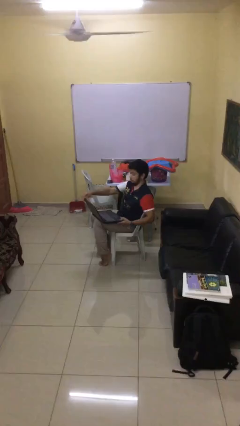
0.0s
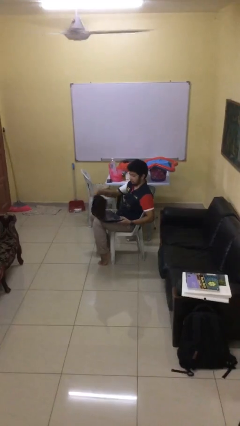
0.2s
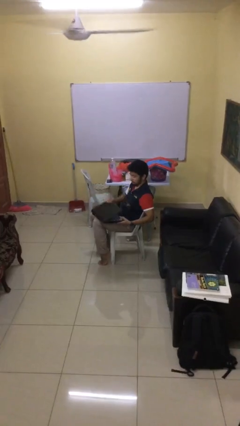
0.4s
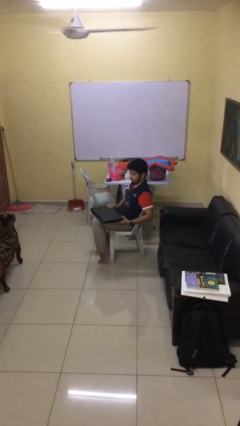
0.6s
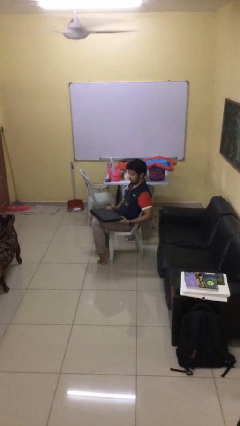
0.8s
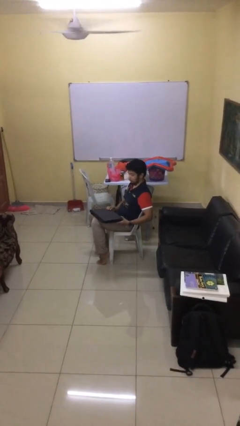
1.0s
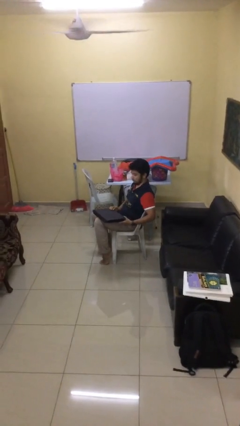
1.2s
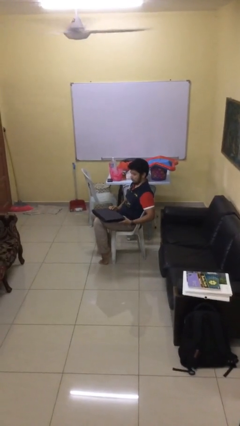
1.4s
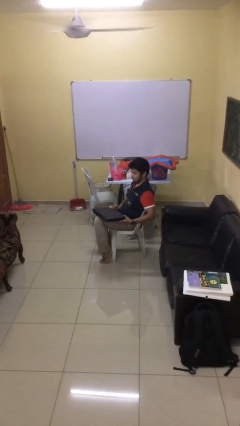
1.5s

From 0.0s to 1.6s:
person closes laptop

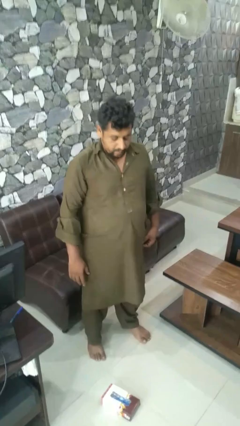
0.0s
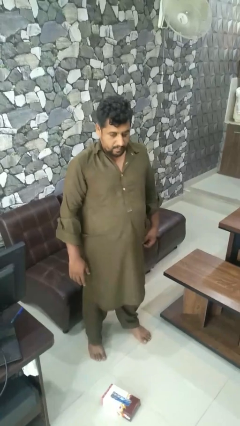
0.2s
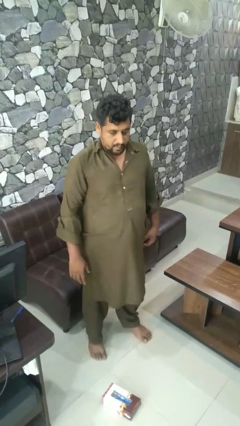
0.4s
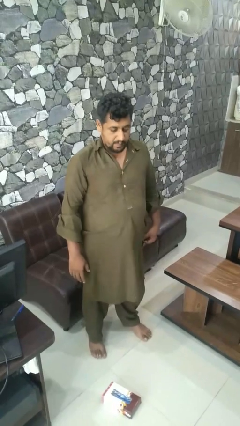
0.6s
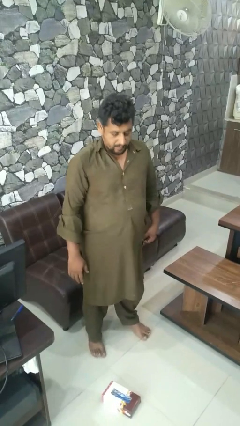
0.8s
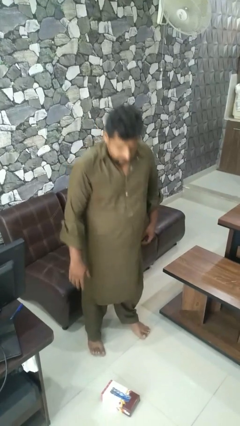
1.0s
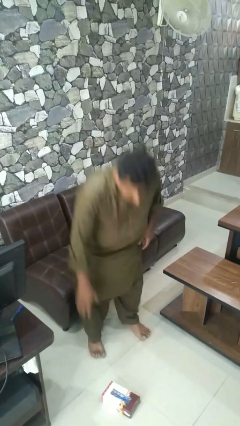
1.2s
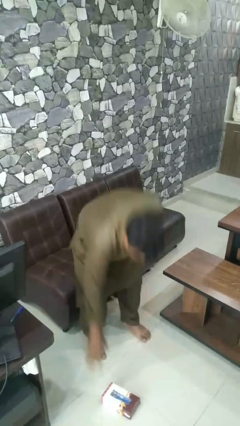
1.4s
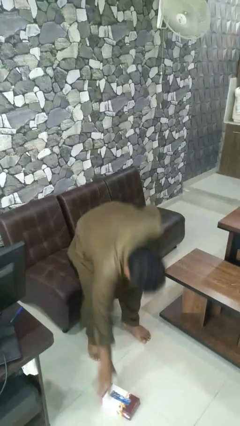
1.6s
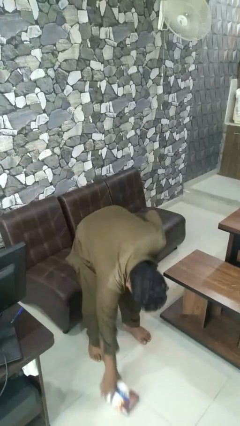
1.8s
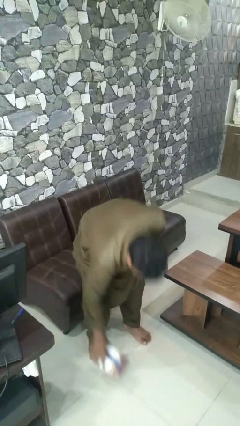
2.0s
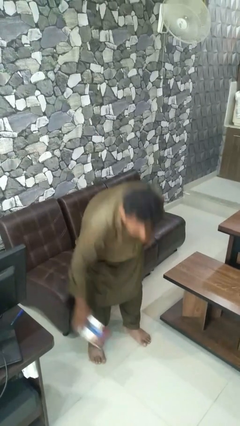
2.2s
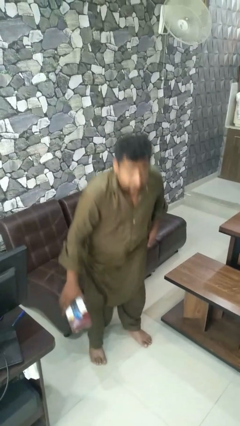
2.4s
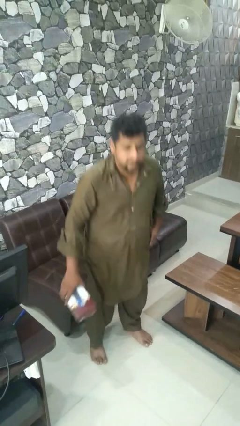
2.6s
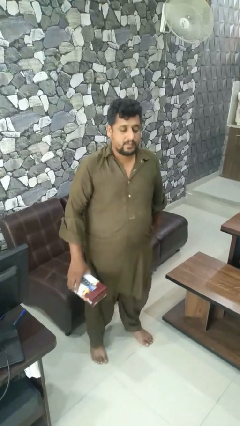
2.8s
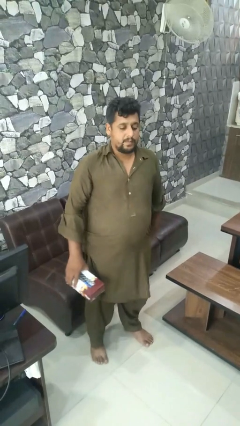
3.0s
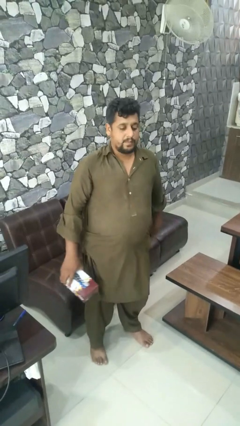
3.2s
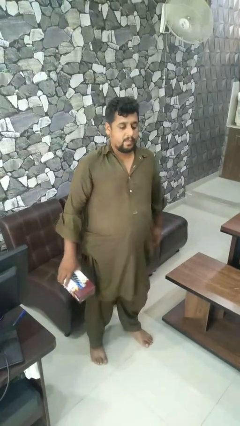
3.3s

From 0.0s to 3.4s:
person picks up object from floor

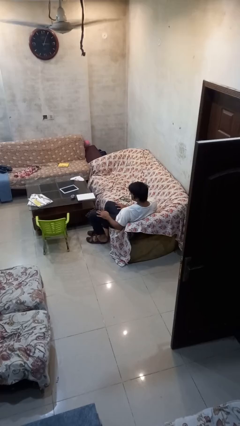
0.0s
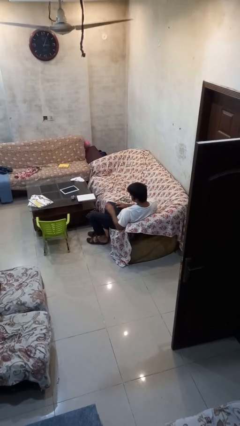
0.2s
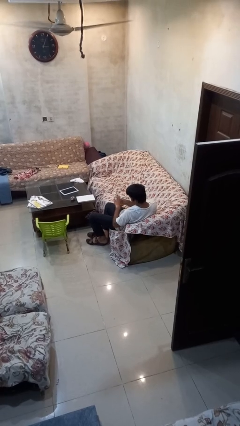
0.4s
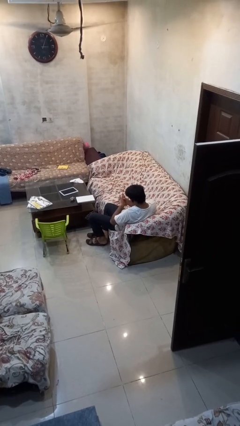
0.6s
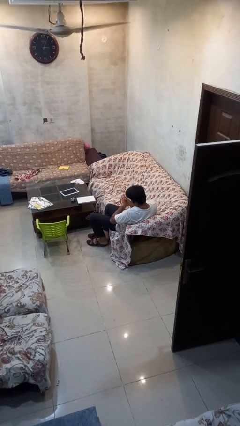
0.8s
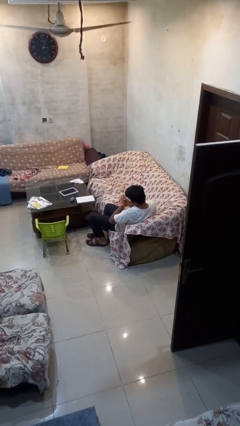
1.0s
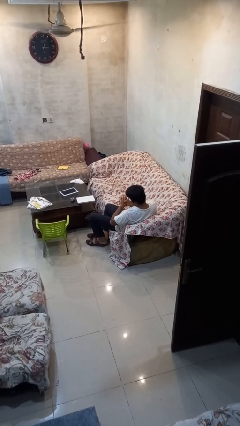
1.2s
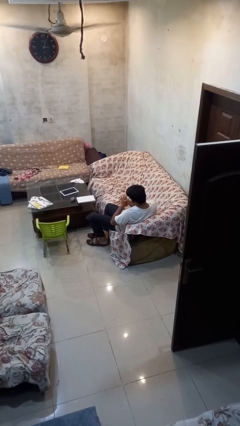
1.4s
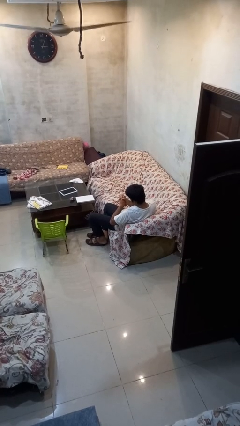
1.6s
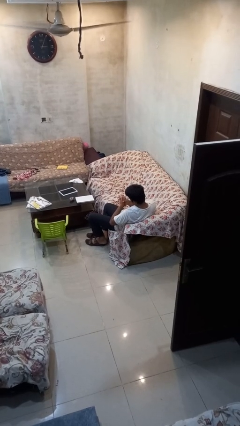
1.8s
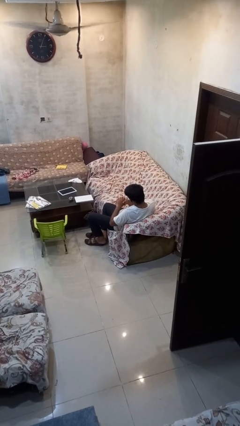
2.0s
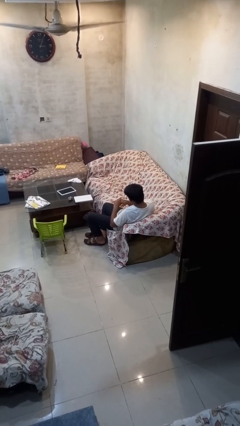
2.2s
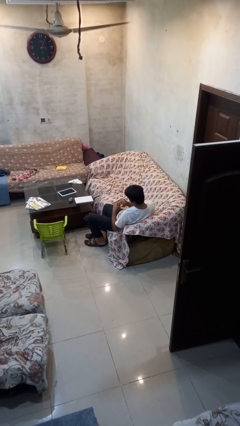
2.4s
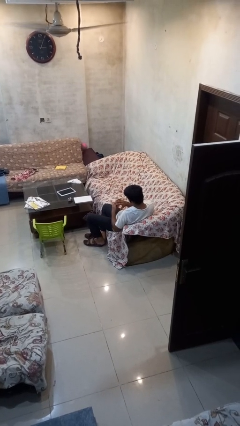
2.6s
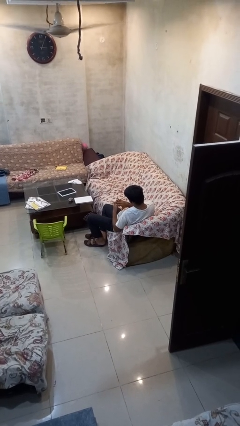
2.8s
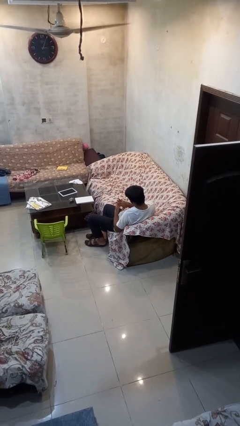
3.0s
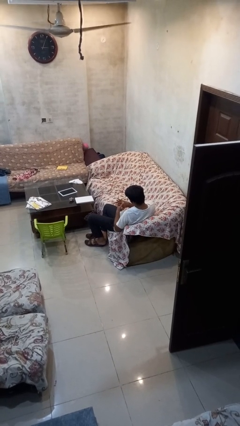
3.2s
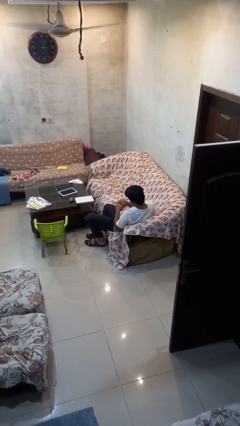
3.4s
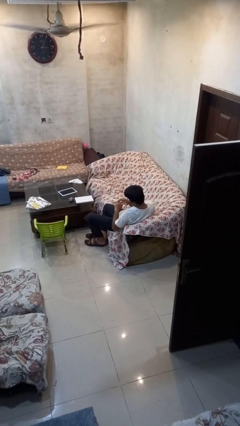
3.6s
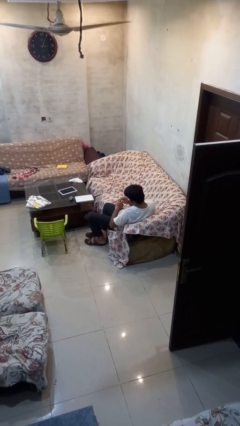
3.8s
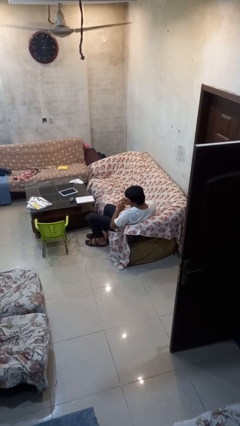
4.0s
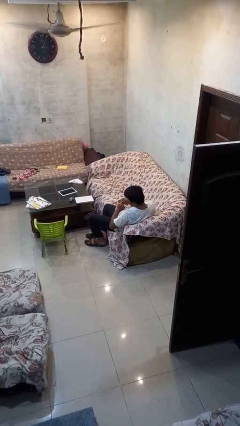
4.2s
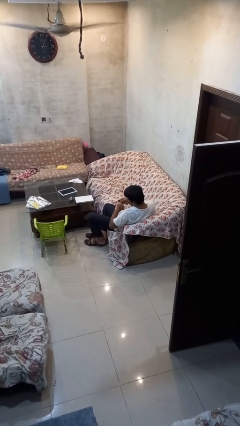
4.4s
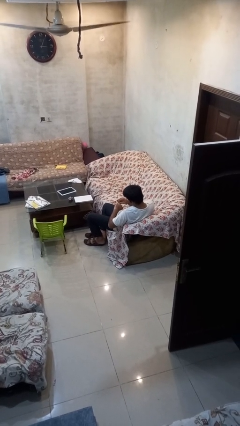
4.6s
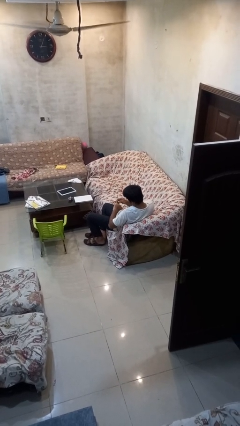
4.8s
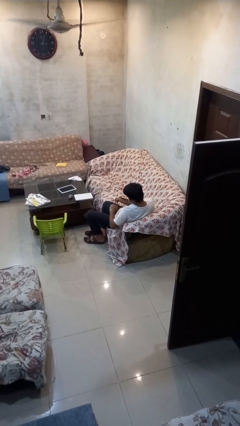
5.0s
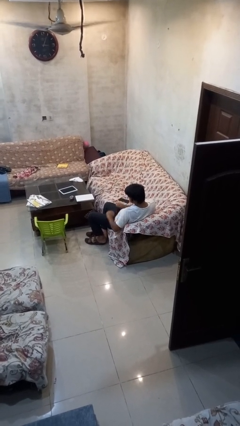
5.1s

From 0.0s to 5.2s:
person looks at hands in lap

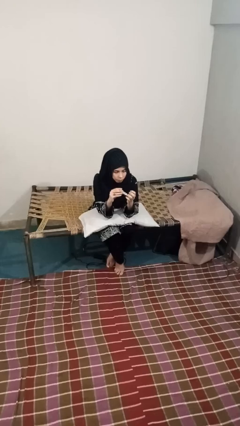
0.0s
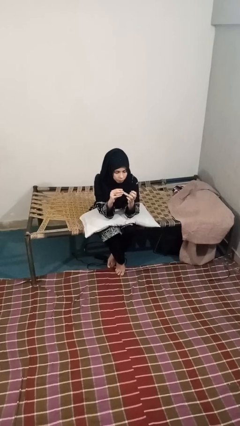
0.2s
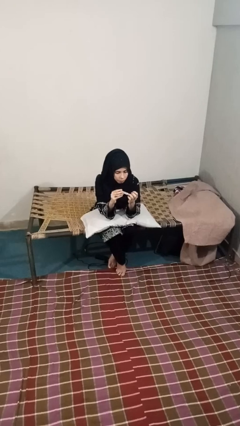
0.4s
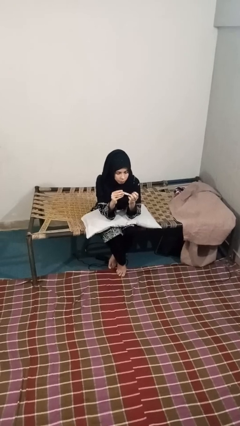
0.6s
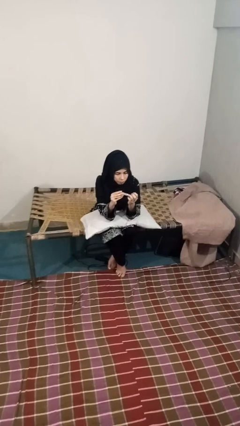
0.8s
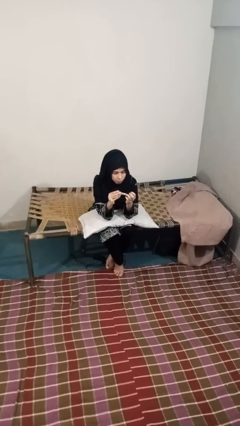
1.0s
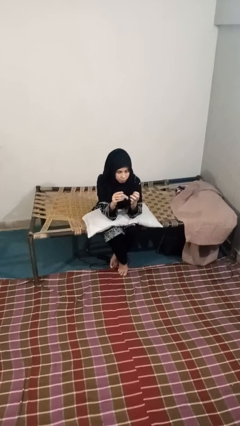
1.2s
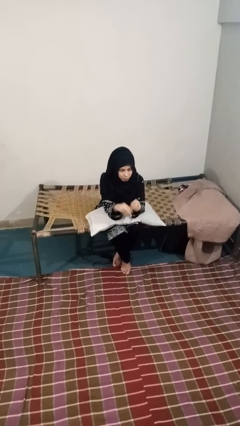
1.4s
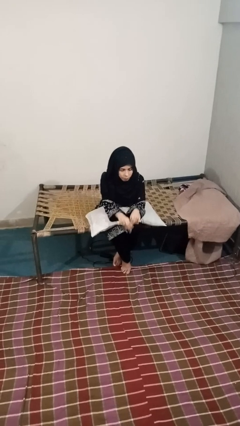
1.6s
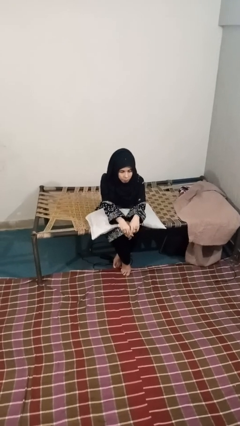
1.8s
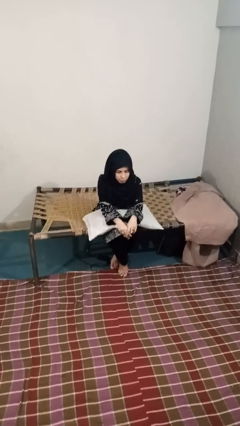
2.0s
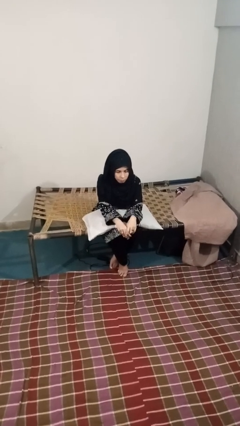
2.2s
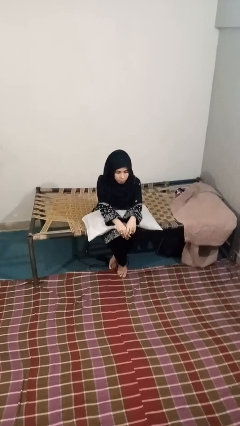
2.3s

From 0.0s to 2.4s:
person clips fingernails

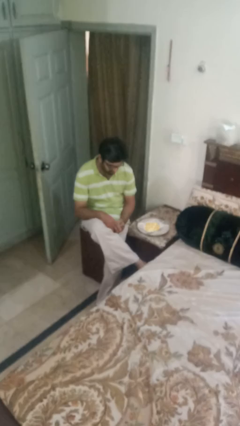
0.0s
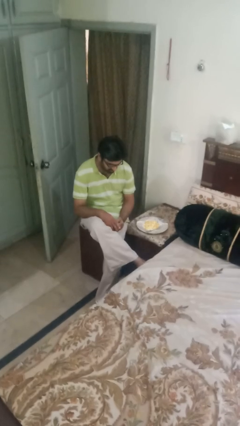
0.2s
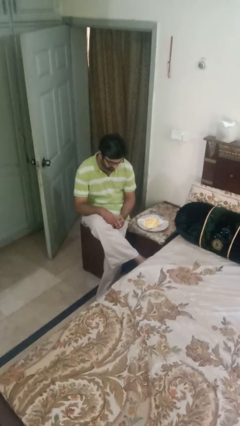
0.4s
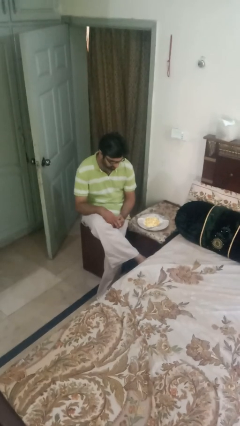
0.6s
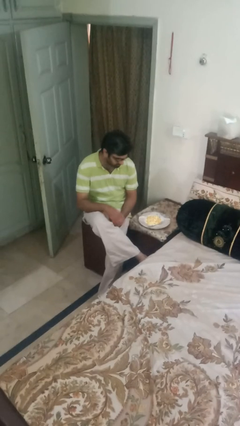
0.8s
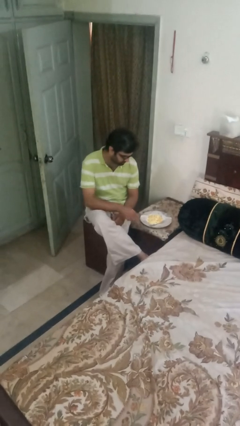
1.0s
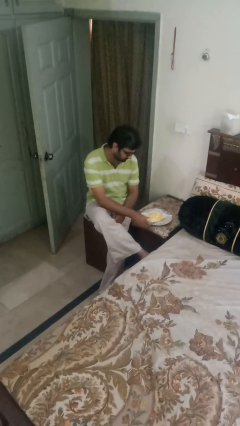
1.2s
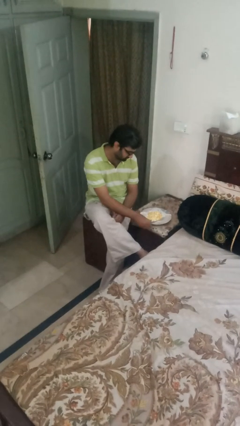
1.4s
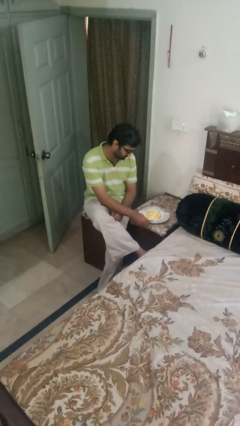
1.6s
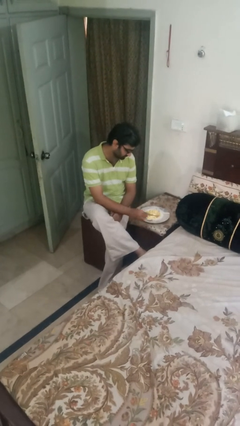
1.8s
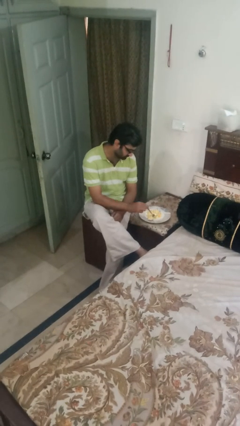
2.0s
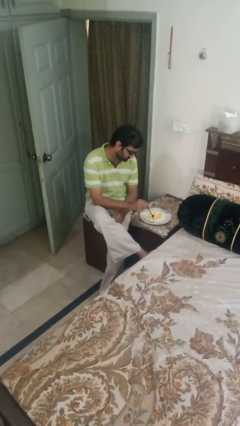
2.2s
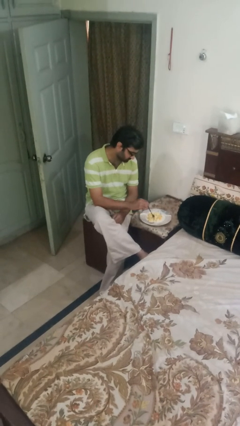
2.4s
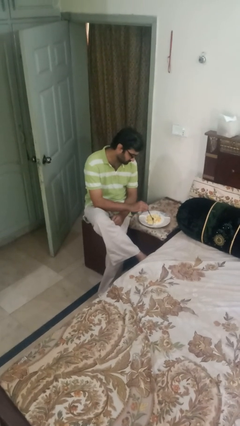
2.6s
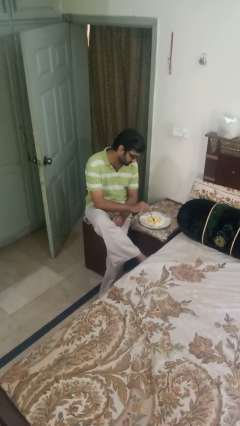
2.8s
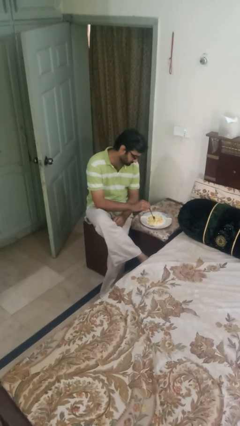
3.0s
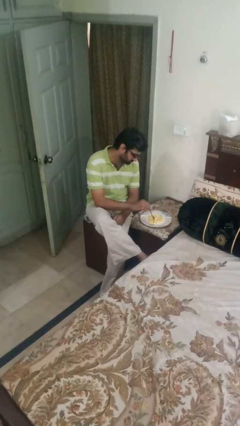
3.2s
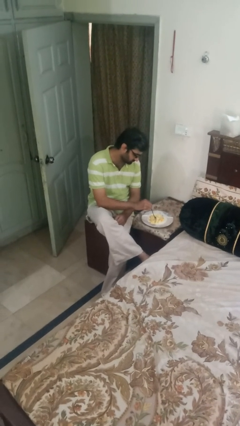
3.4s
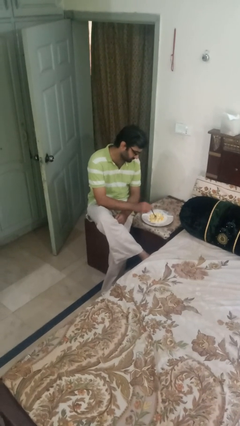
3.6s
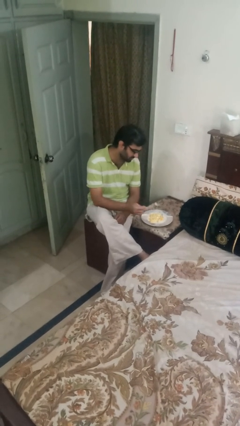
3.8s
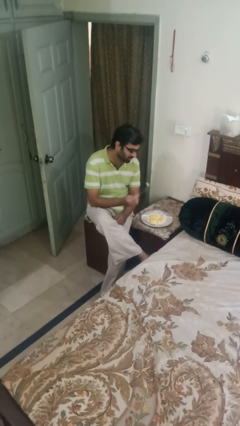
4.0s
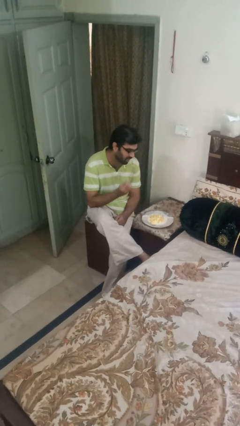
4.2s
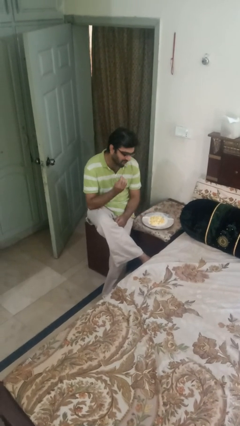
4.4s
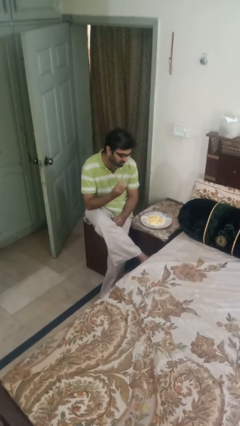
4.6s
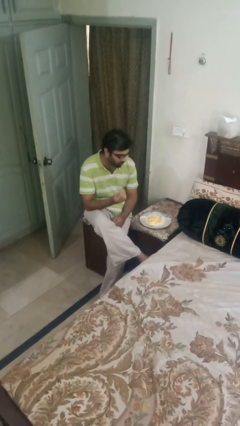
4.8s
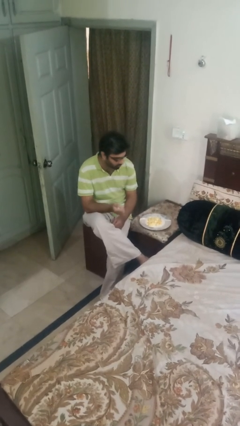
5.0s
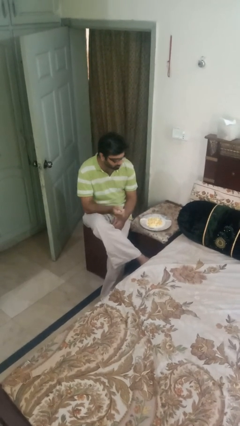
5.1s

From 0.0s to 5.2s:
person eats with utensil

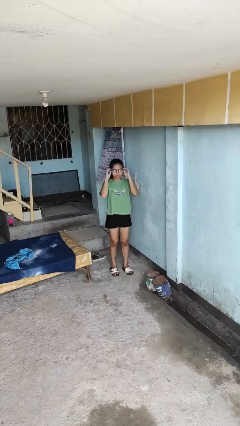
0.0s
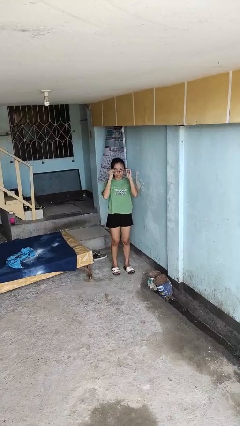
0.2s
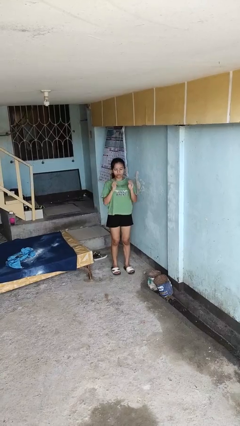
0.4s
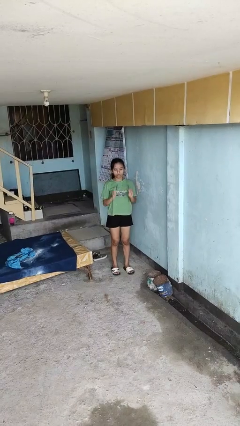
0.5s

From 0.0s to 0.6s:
person takes off glasses
